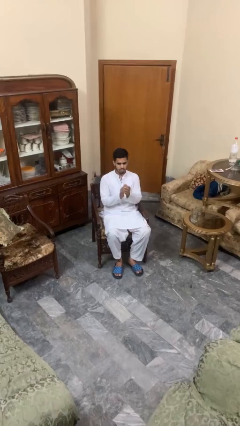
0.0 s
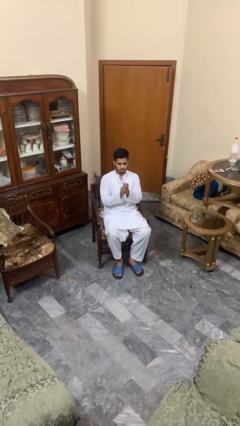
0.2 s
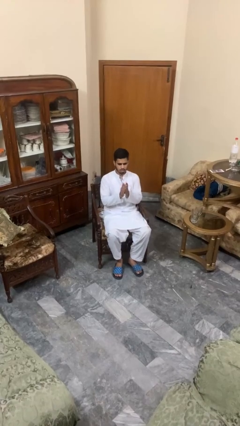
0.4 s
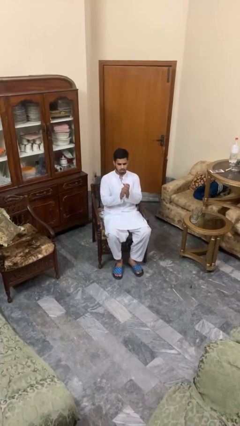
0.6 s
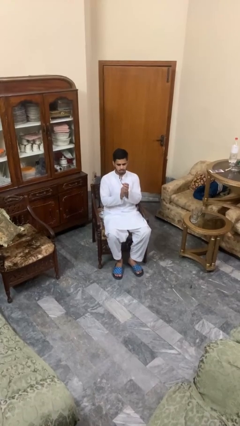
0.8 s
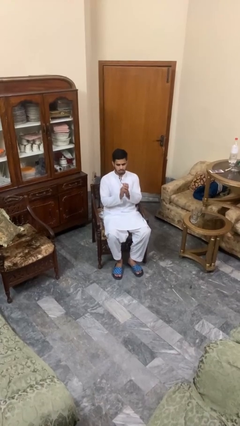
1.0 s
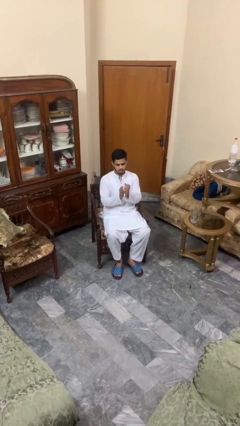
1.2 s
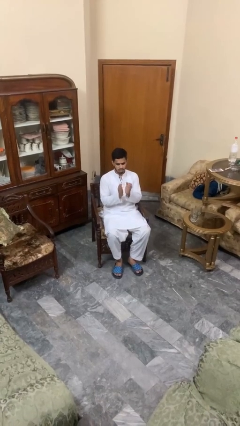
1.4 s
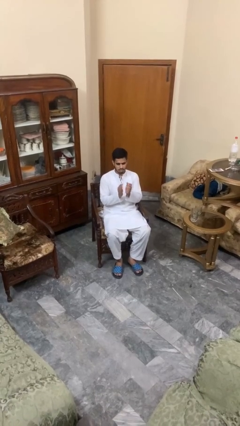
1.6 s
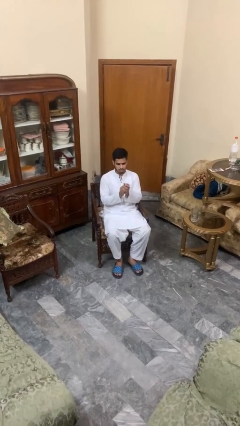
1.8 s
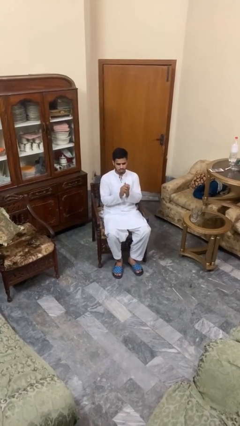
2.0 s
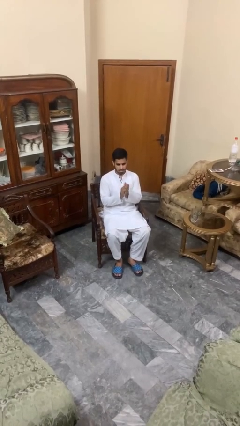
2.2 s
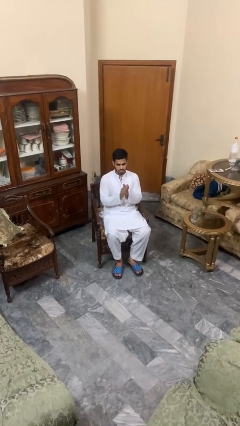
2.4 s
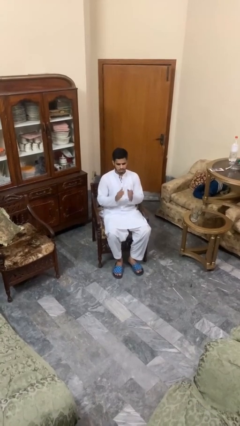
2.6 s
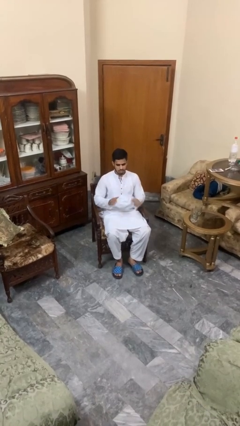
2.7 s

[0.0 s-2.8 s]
person claps hands

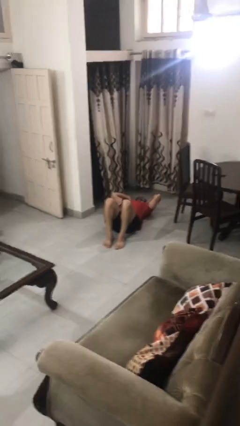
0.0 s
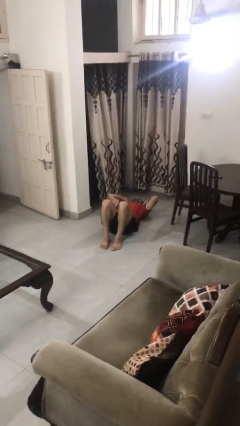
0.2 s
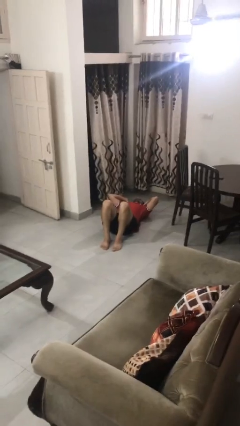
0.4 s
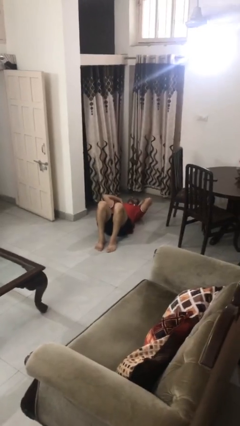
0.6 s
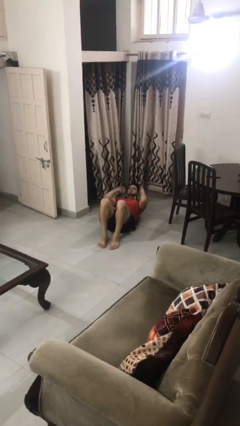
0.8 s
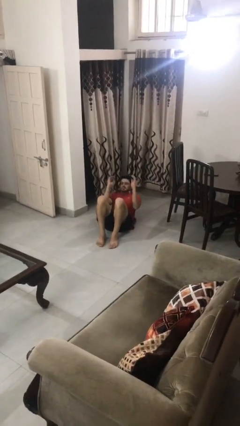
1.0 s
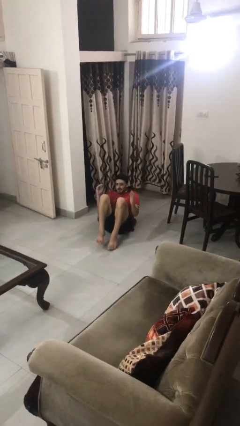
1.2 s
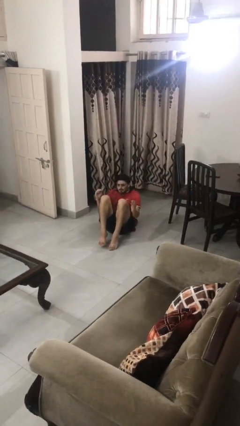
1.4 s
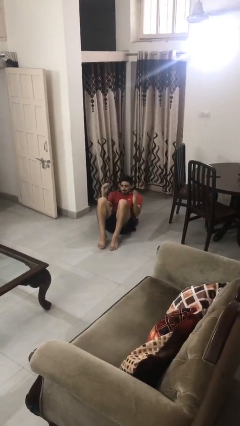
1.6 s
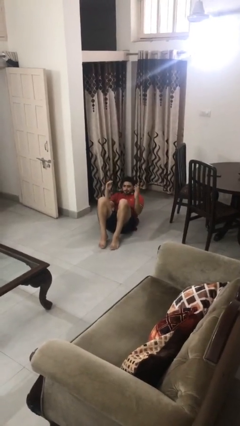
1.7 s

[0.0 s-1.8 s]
person exercises with situp

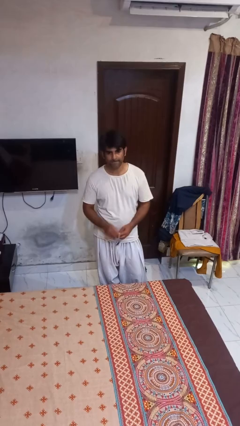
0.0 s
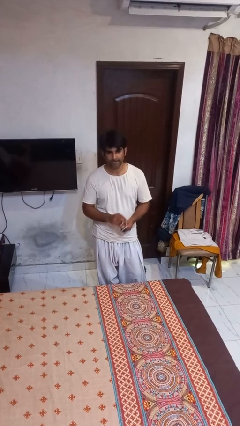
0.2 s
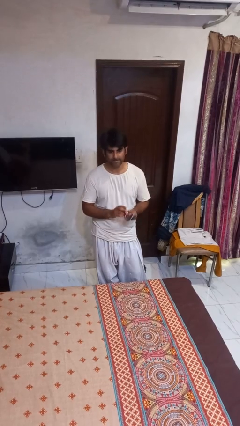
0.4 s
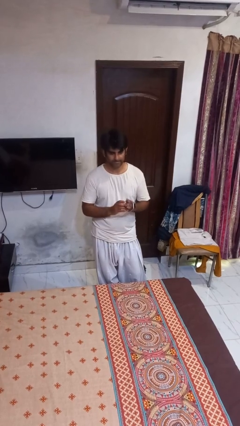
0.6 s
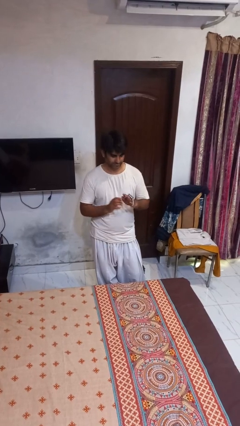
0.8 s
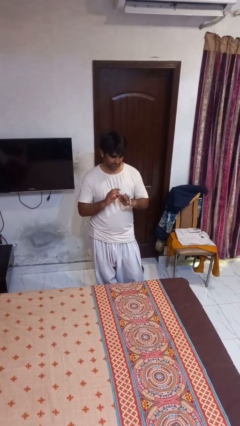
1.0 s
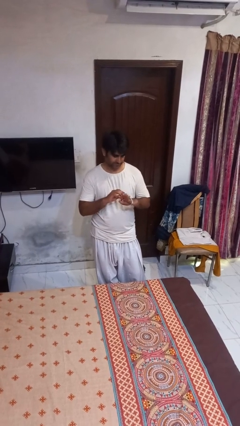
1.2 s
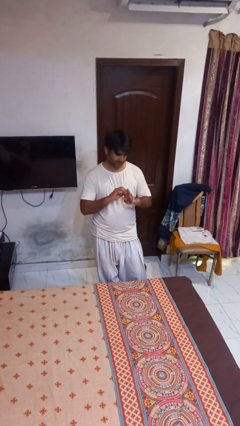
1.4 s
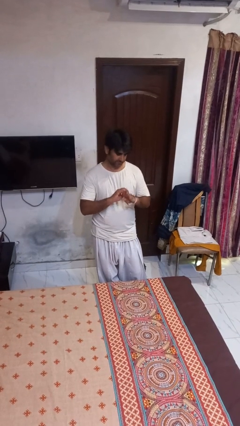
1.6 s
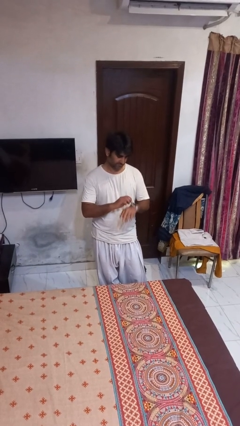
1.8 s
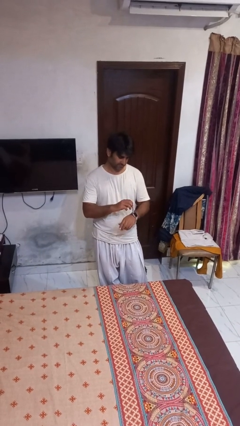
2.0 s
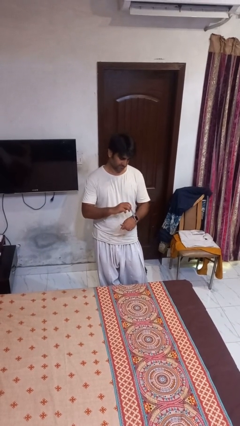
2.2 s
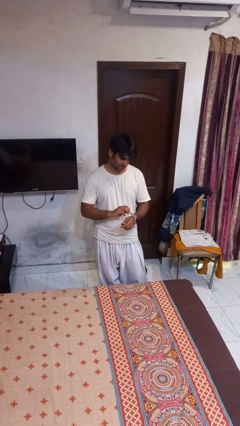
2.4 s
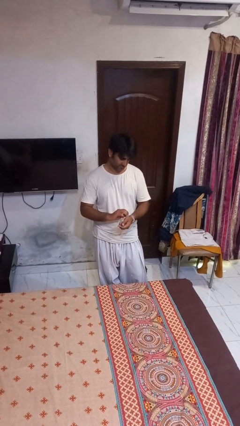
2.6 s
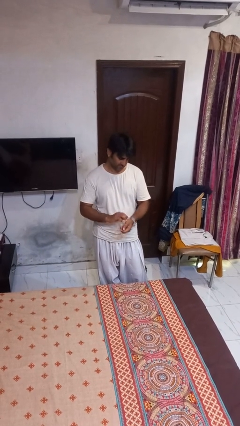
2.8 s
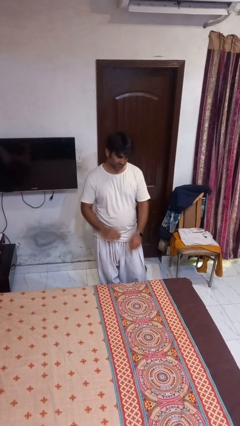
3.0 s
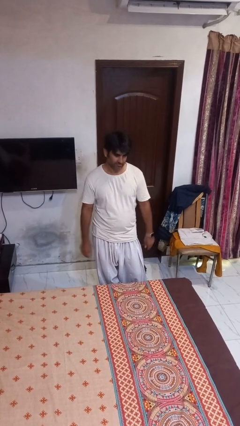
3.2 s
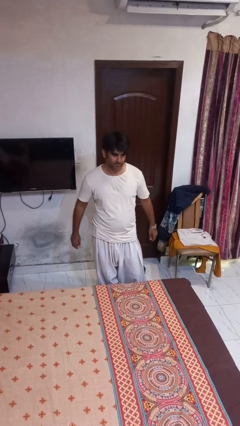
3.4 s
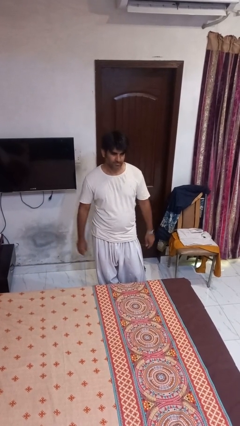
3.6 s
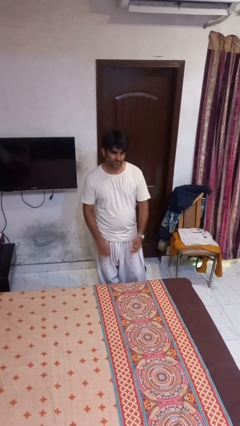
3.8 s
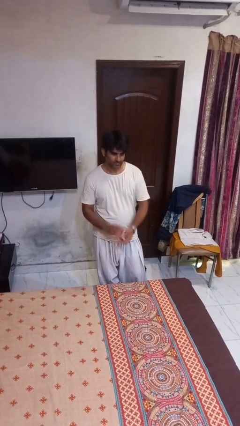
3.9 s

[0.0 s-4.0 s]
person puts on wristwatch

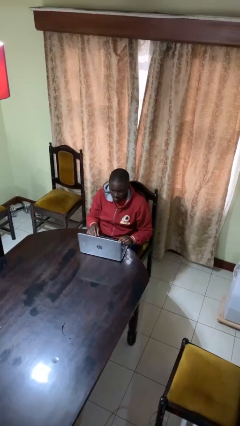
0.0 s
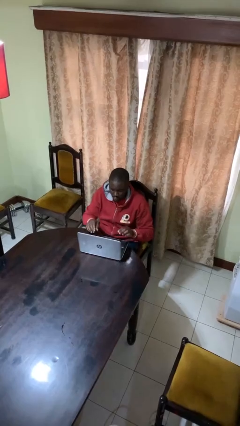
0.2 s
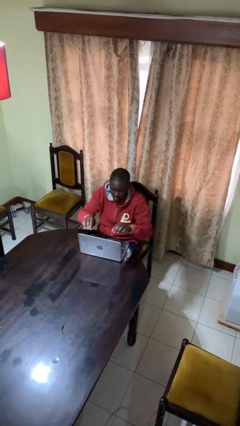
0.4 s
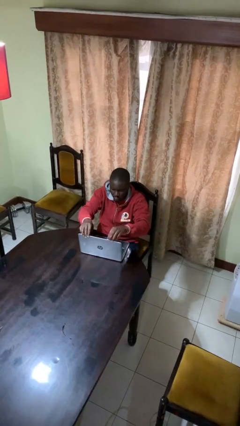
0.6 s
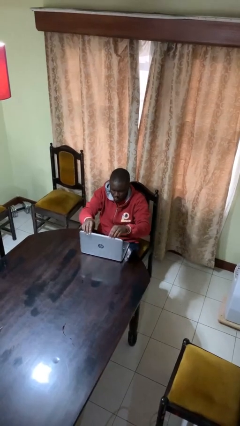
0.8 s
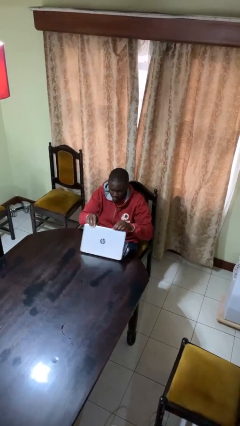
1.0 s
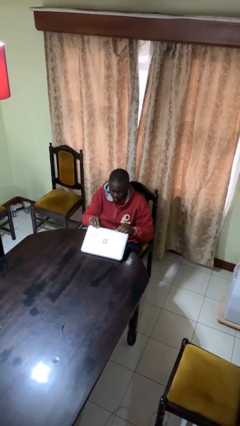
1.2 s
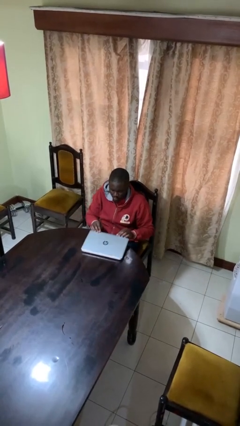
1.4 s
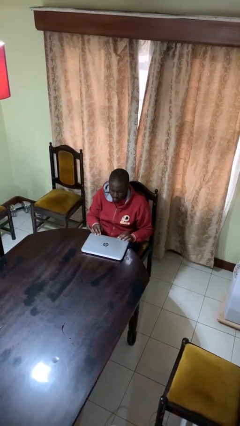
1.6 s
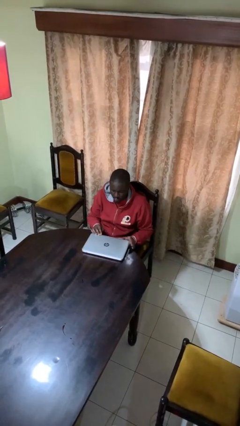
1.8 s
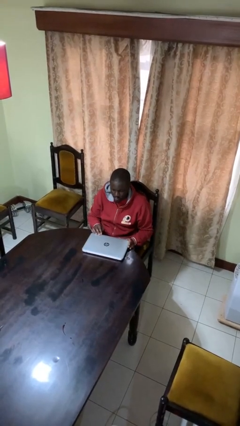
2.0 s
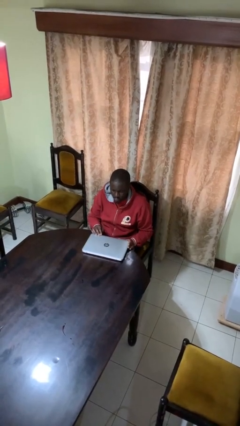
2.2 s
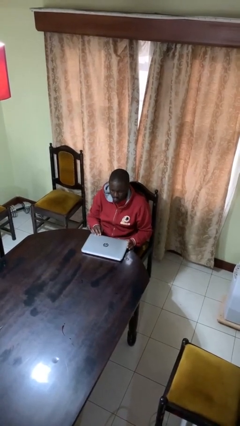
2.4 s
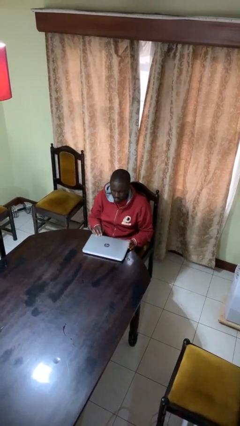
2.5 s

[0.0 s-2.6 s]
person closes laptop

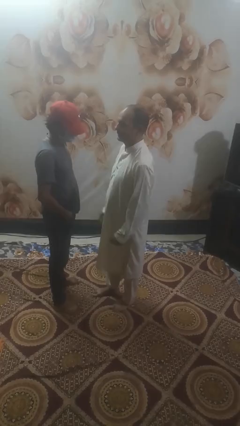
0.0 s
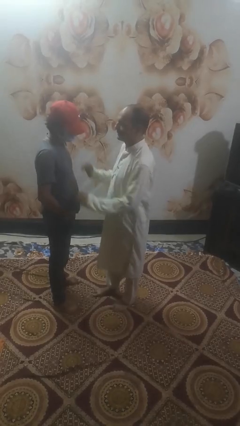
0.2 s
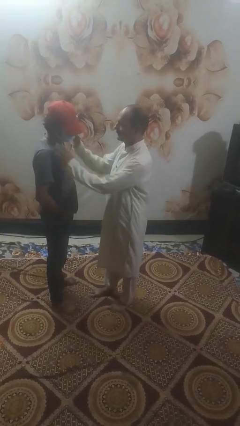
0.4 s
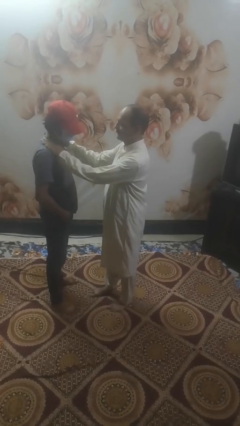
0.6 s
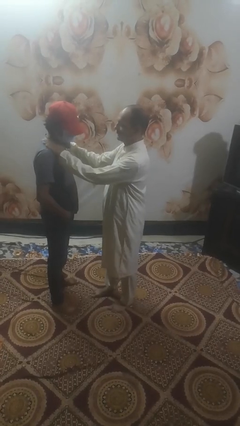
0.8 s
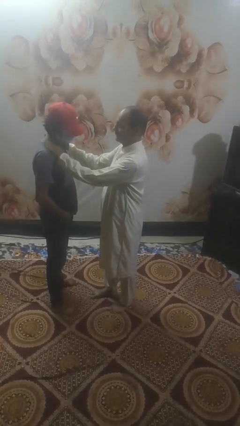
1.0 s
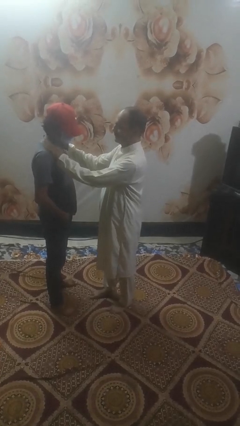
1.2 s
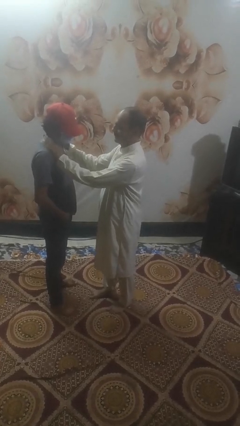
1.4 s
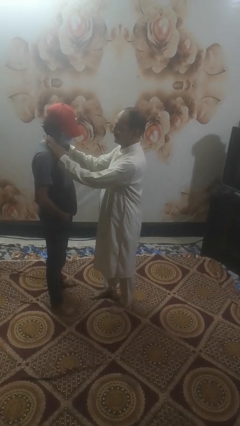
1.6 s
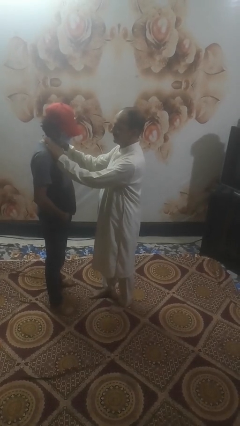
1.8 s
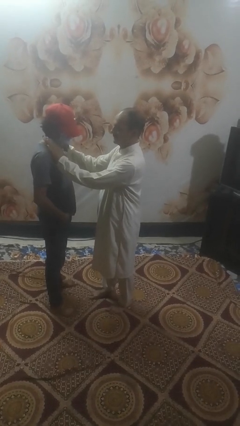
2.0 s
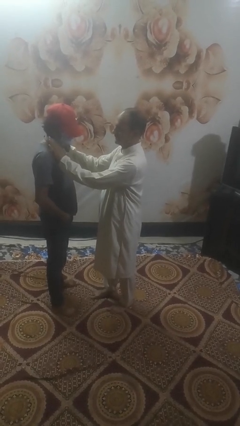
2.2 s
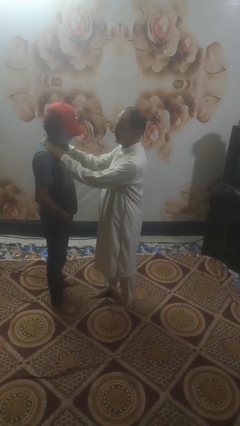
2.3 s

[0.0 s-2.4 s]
person pounds shoulders of person

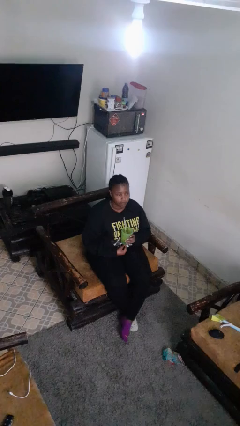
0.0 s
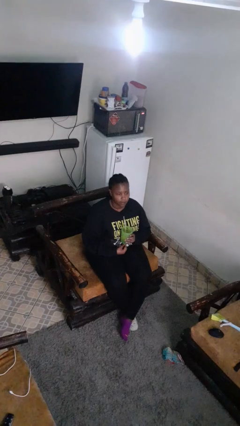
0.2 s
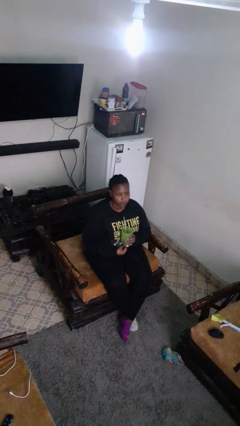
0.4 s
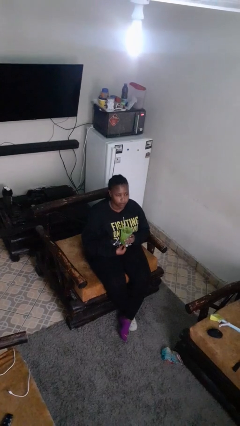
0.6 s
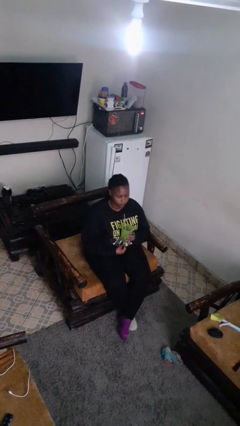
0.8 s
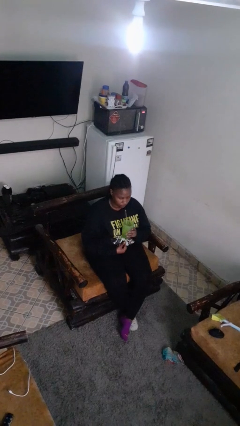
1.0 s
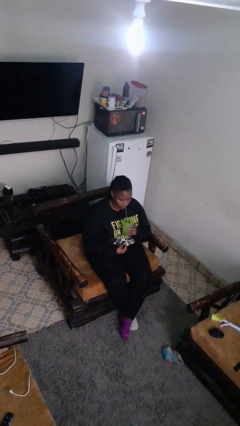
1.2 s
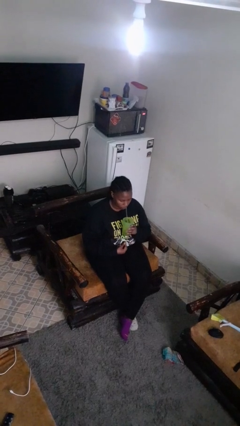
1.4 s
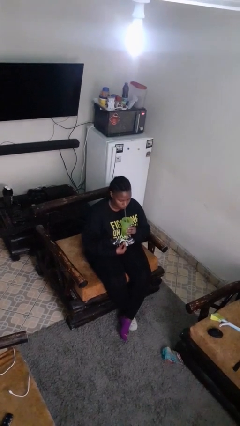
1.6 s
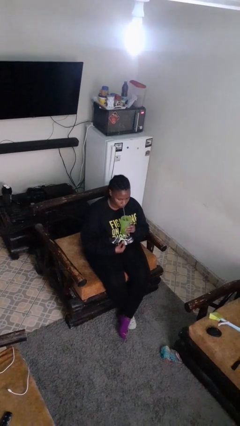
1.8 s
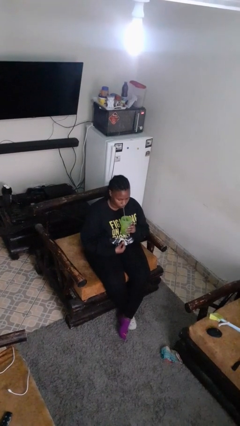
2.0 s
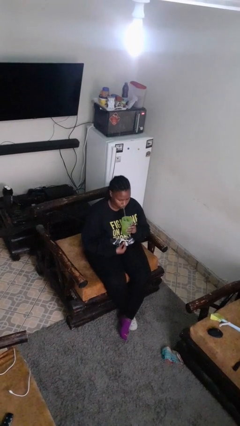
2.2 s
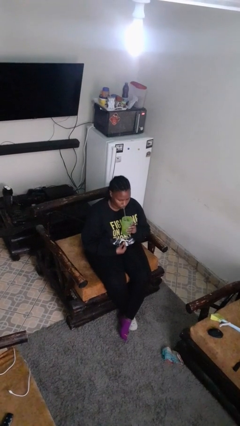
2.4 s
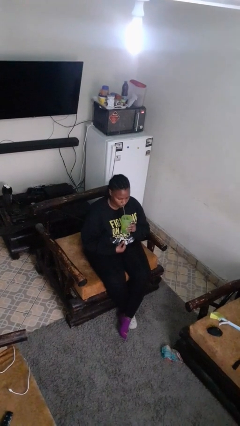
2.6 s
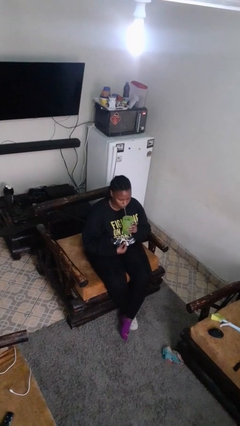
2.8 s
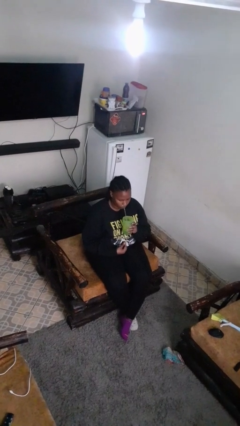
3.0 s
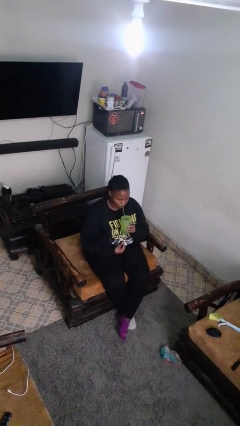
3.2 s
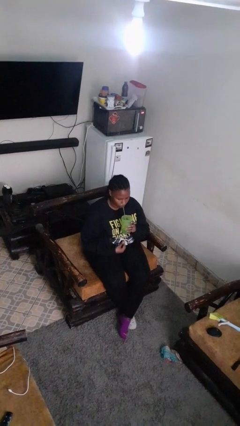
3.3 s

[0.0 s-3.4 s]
person drinks from straw

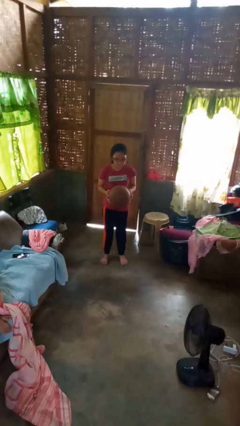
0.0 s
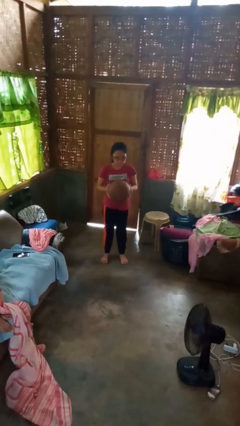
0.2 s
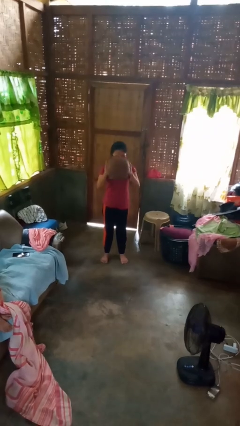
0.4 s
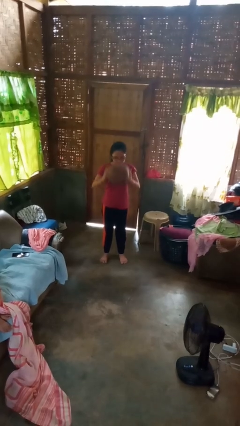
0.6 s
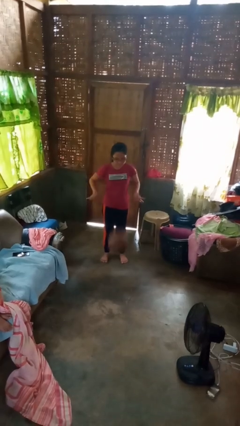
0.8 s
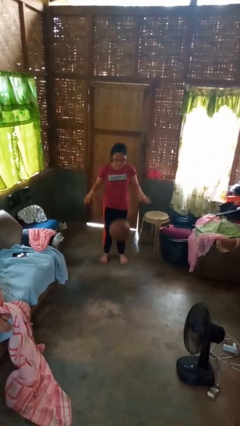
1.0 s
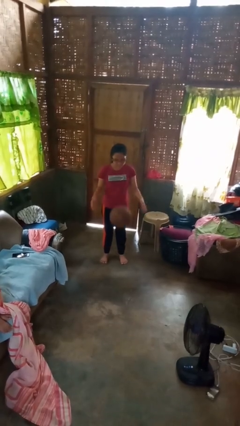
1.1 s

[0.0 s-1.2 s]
person bounces ball on floor
